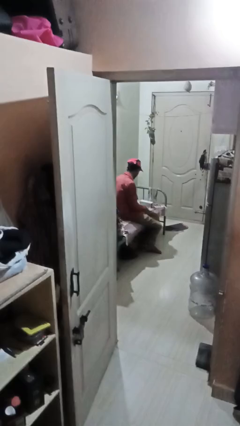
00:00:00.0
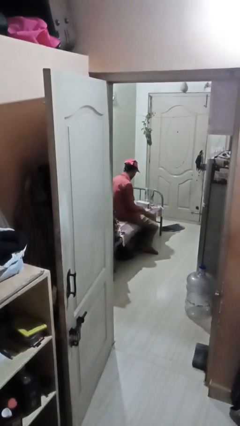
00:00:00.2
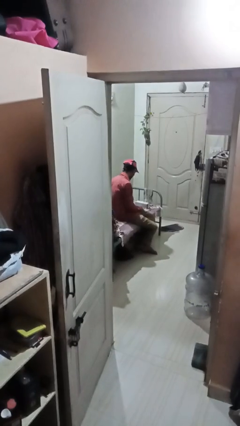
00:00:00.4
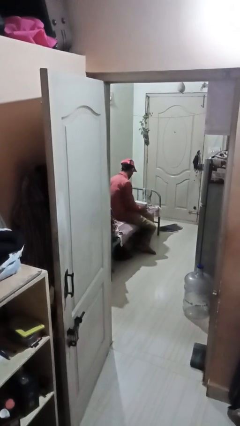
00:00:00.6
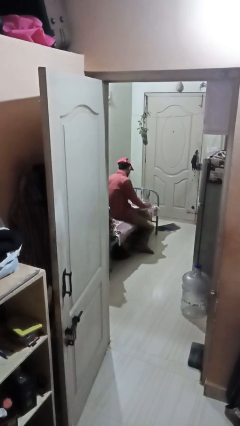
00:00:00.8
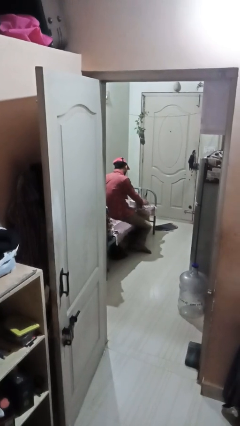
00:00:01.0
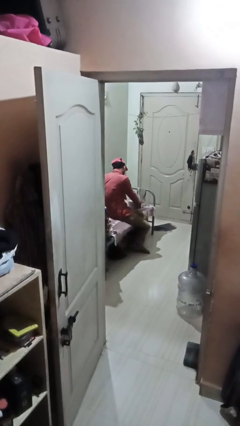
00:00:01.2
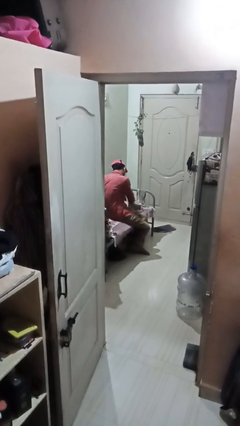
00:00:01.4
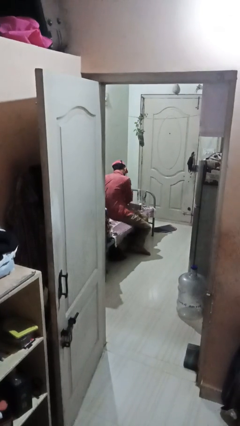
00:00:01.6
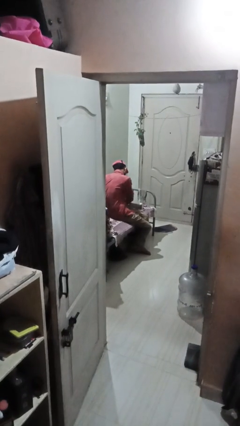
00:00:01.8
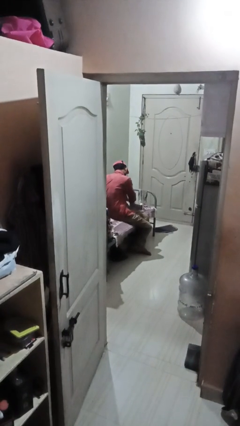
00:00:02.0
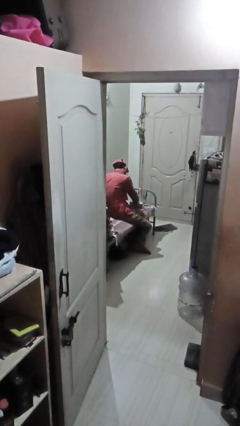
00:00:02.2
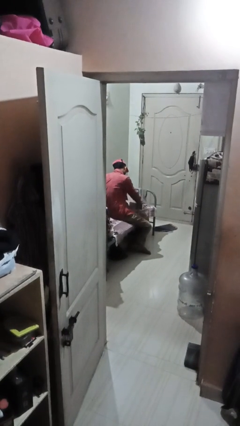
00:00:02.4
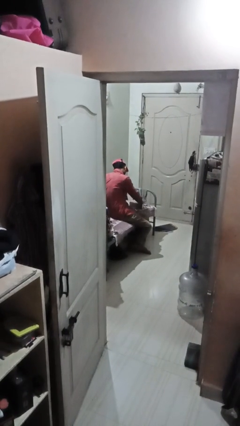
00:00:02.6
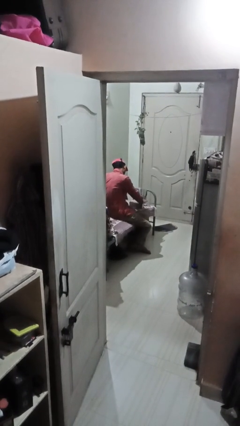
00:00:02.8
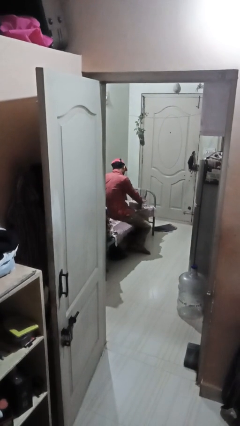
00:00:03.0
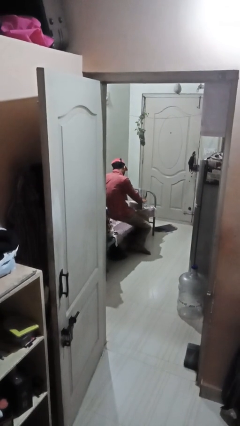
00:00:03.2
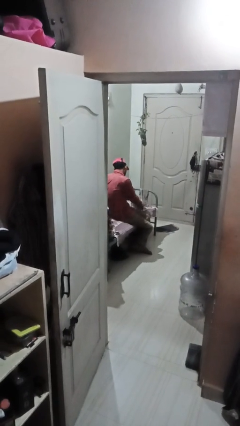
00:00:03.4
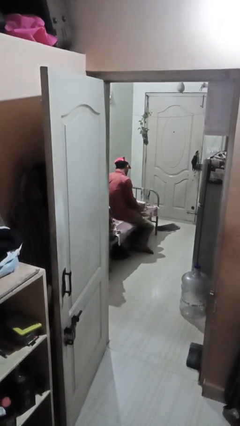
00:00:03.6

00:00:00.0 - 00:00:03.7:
person waves hand over object

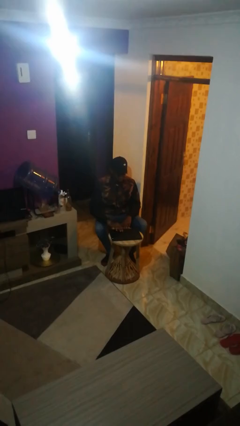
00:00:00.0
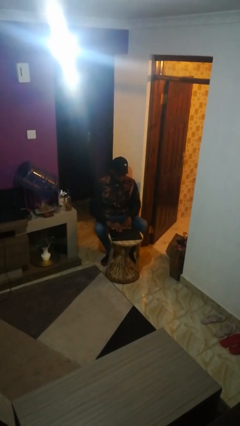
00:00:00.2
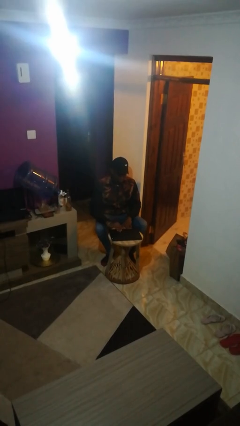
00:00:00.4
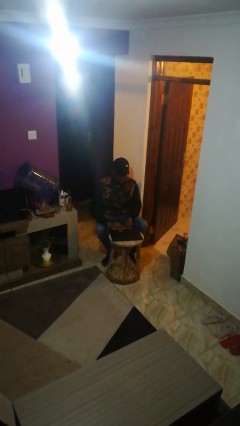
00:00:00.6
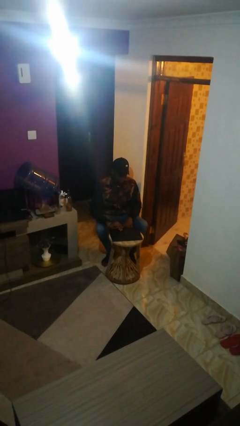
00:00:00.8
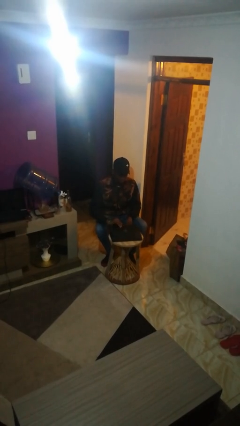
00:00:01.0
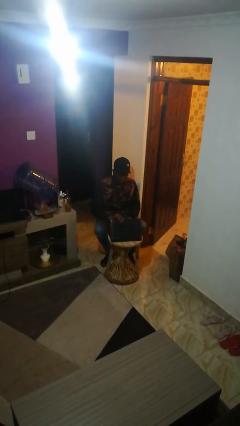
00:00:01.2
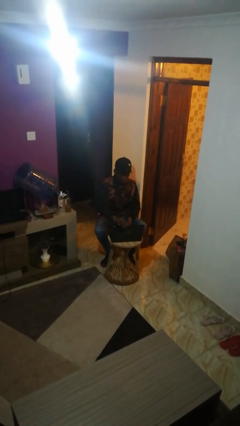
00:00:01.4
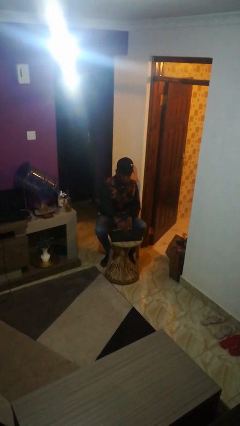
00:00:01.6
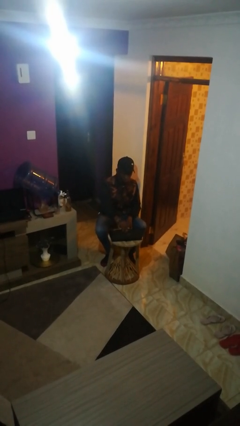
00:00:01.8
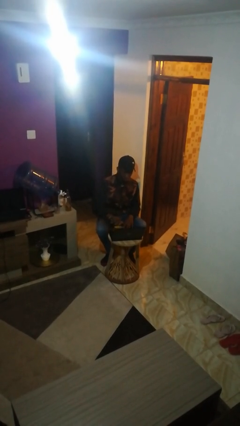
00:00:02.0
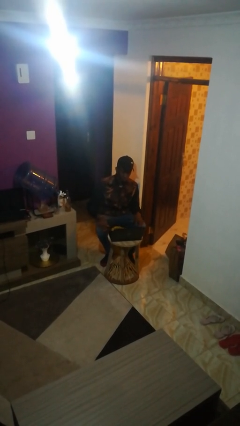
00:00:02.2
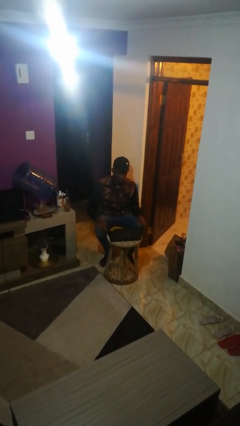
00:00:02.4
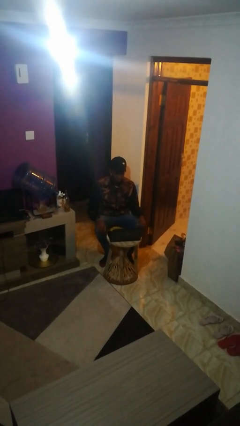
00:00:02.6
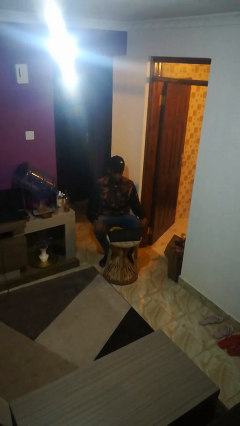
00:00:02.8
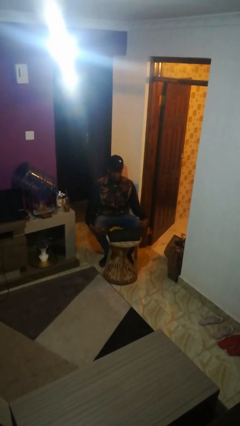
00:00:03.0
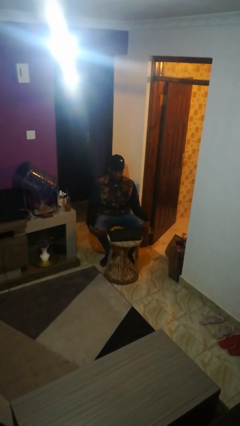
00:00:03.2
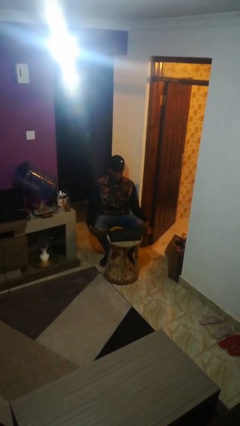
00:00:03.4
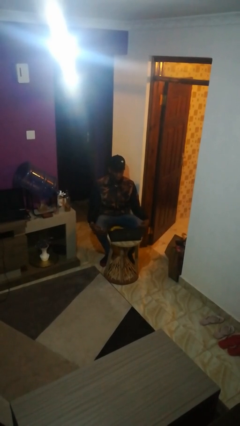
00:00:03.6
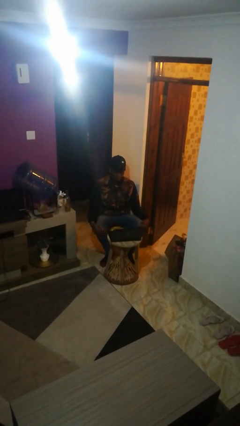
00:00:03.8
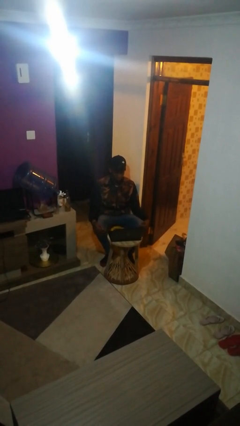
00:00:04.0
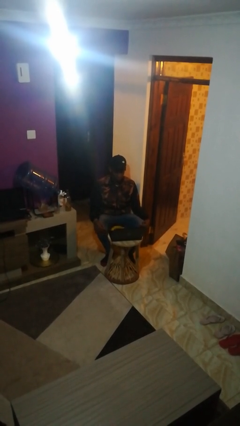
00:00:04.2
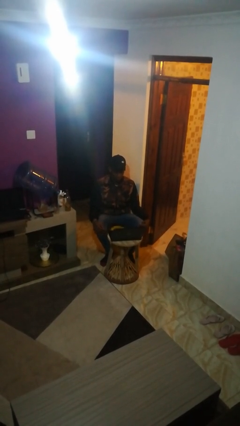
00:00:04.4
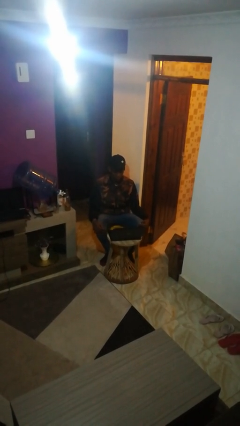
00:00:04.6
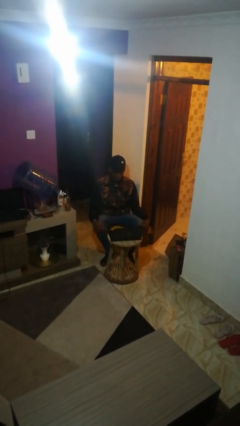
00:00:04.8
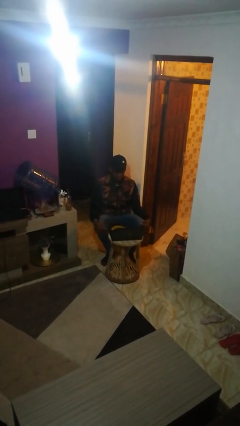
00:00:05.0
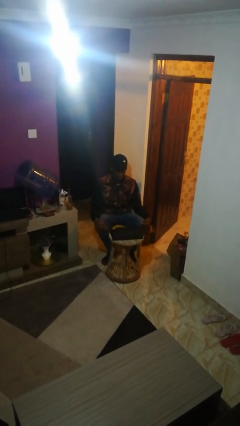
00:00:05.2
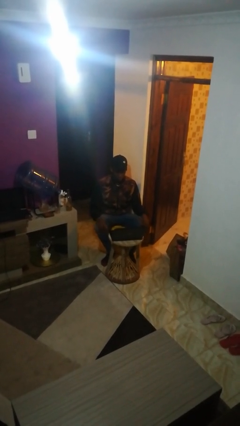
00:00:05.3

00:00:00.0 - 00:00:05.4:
person opens laptop

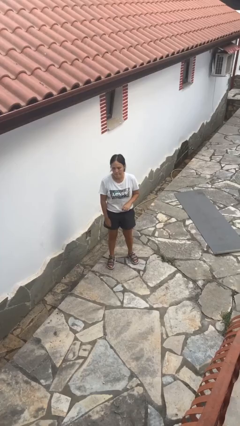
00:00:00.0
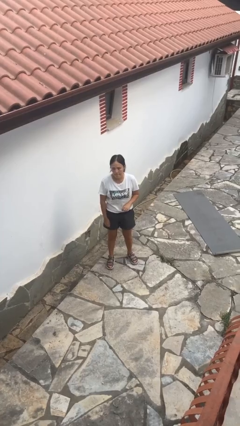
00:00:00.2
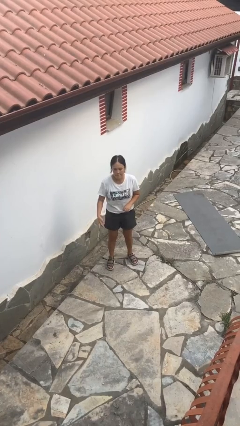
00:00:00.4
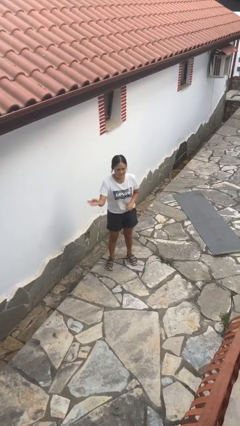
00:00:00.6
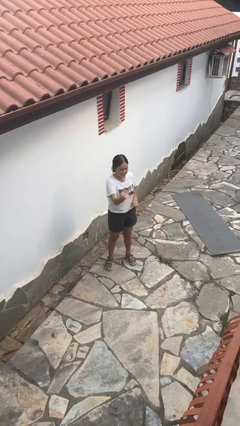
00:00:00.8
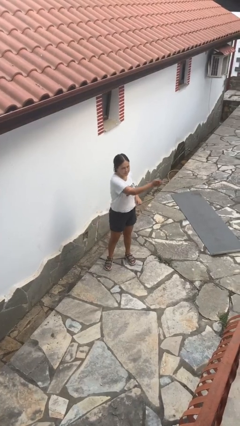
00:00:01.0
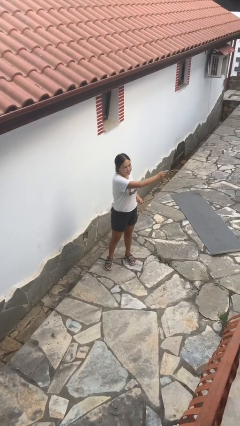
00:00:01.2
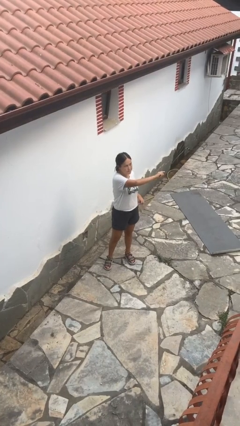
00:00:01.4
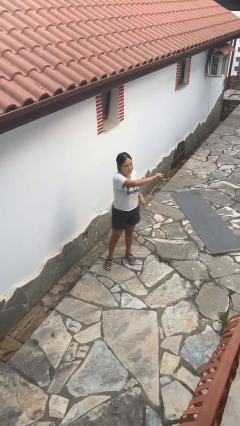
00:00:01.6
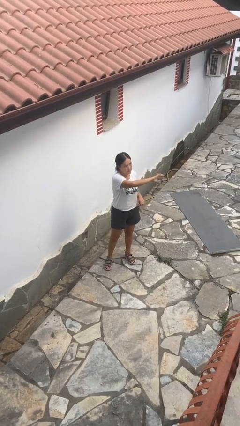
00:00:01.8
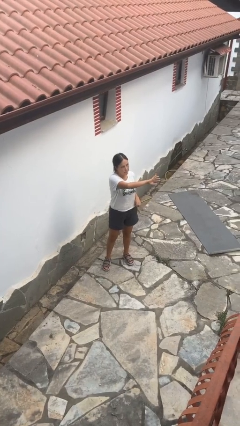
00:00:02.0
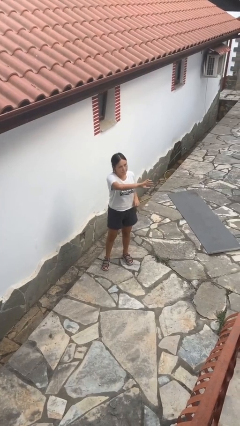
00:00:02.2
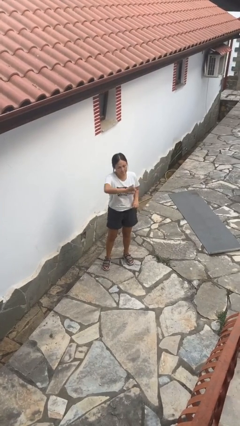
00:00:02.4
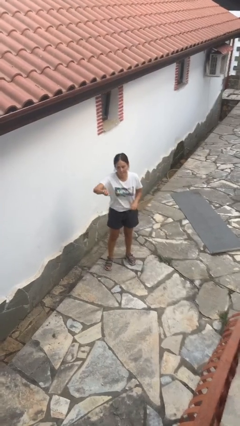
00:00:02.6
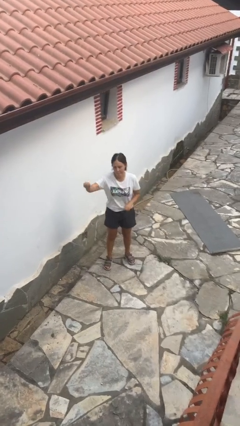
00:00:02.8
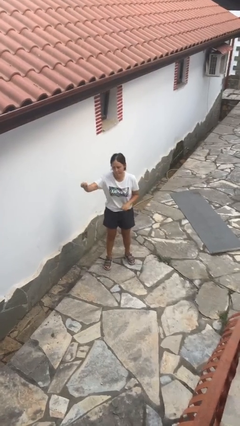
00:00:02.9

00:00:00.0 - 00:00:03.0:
person gestures swipe left

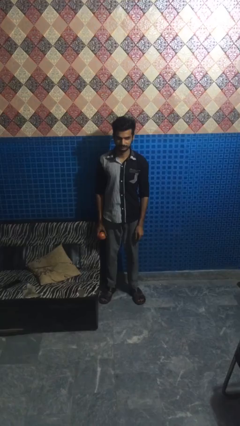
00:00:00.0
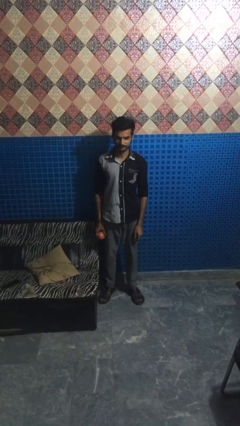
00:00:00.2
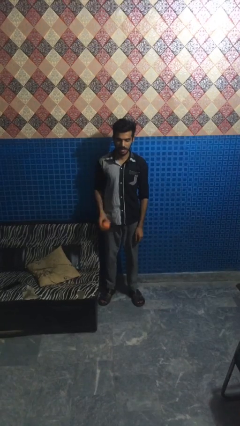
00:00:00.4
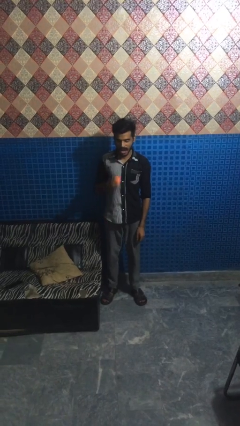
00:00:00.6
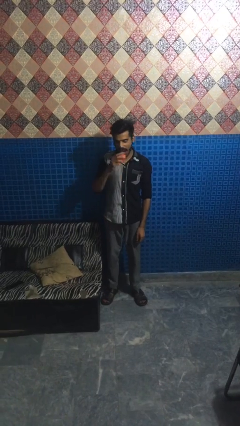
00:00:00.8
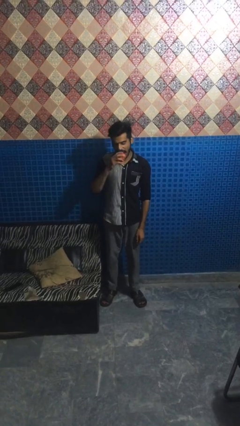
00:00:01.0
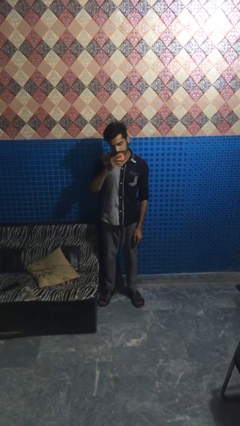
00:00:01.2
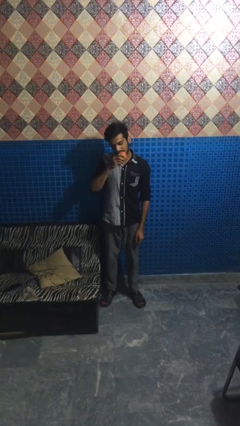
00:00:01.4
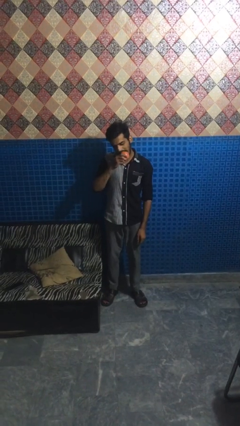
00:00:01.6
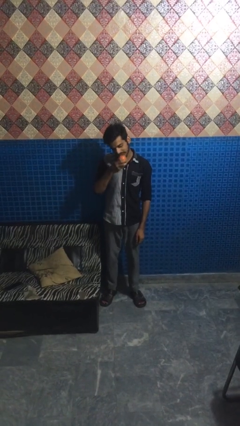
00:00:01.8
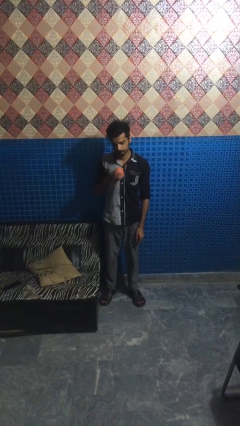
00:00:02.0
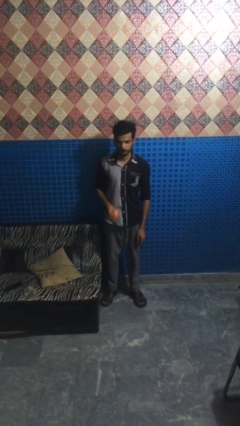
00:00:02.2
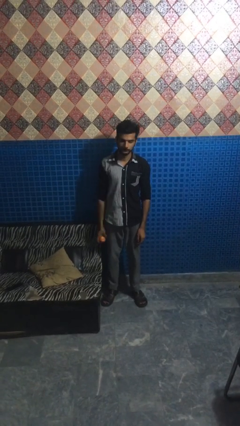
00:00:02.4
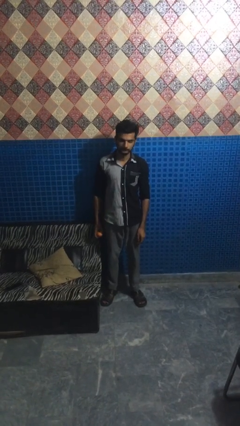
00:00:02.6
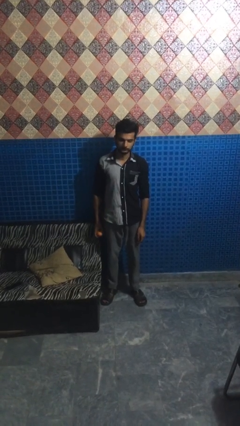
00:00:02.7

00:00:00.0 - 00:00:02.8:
person eats apple

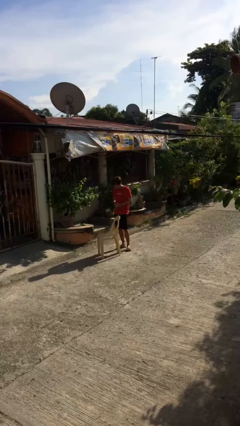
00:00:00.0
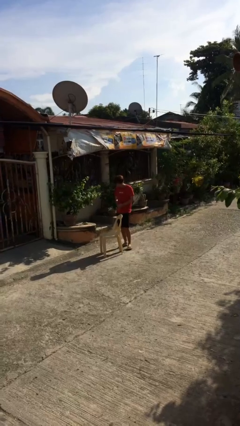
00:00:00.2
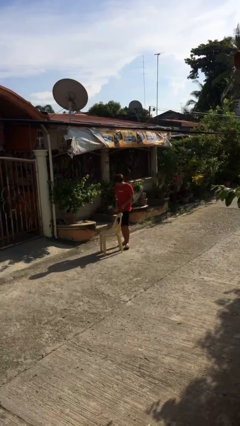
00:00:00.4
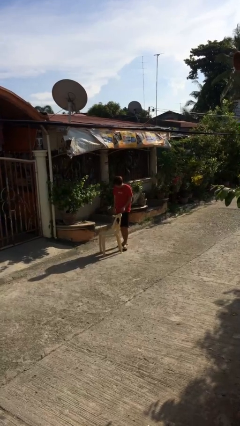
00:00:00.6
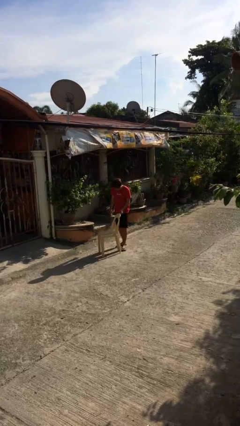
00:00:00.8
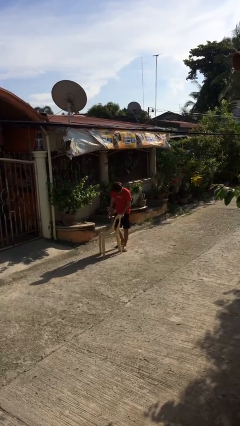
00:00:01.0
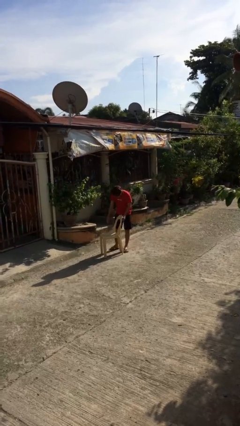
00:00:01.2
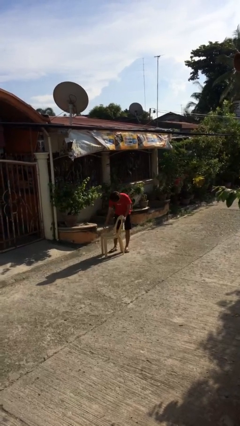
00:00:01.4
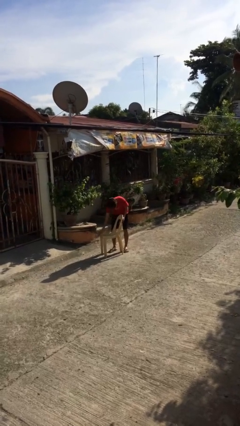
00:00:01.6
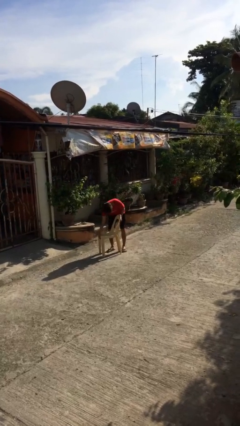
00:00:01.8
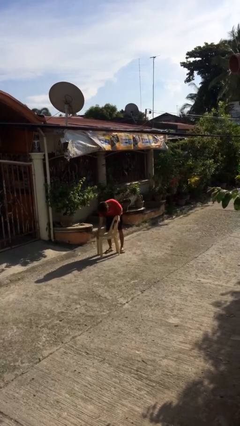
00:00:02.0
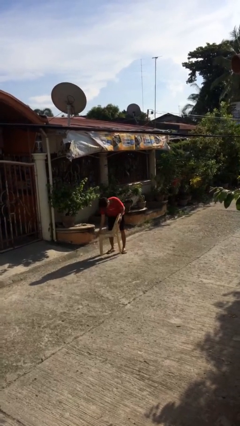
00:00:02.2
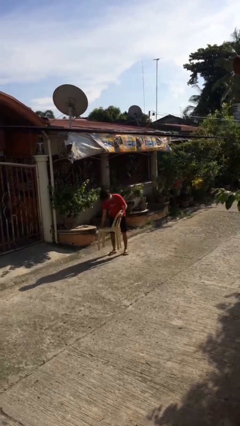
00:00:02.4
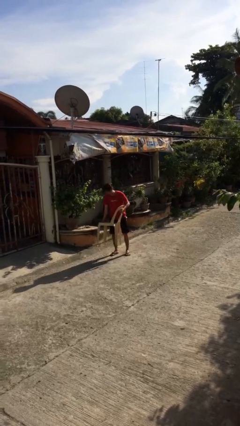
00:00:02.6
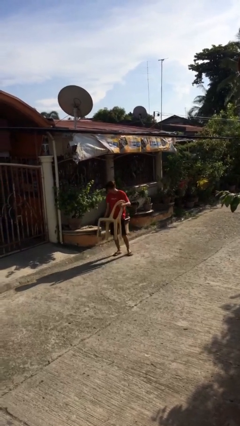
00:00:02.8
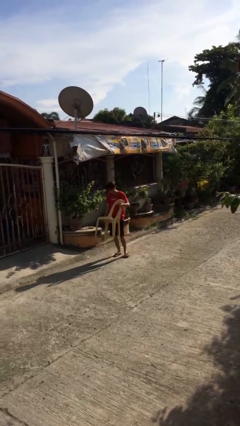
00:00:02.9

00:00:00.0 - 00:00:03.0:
person picks up object from floor
